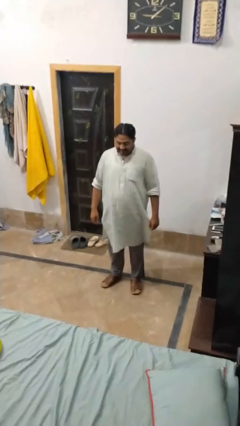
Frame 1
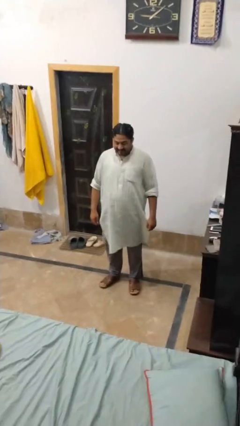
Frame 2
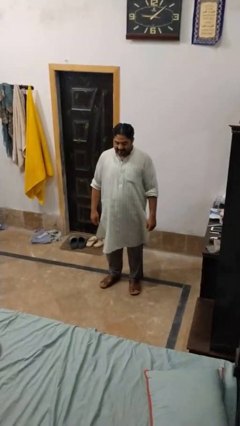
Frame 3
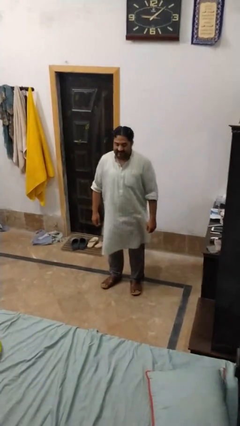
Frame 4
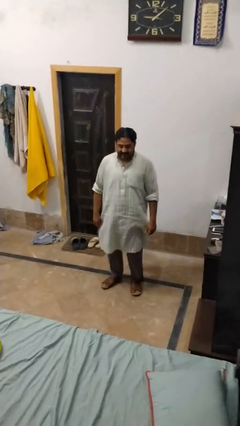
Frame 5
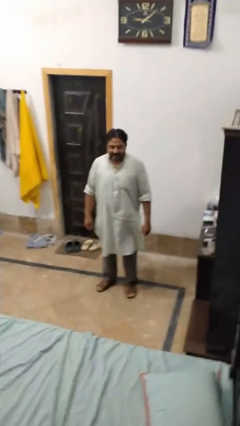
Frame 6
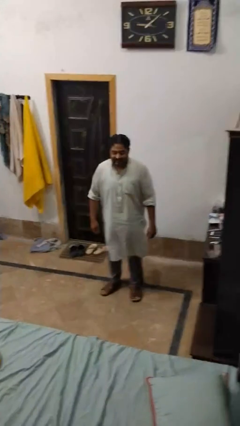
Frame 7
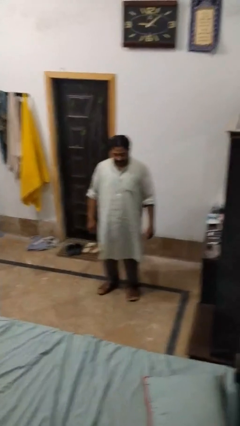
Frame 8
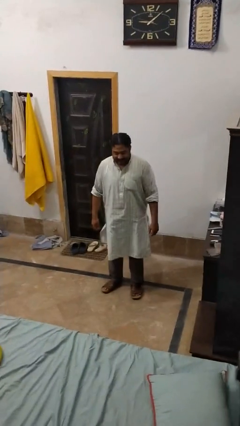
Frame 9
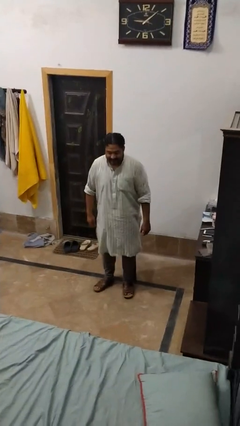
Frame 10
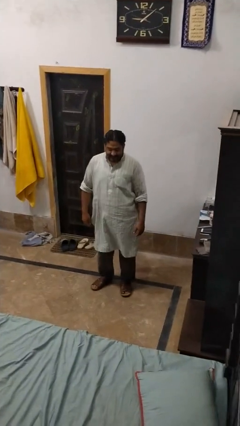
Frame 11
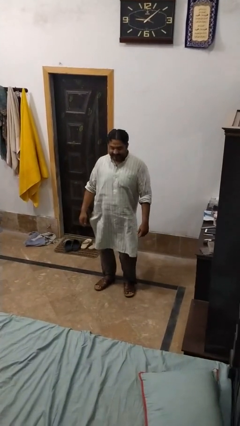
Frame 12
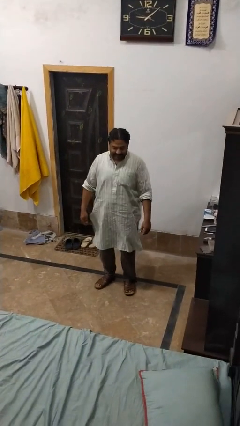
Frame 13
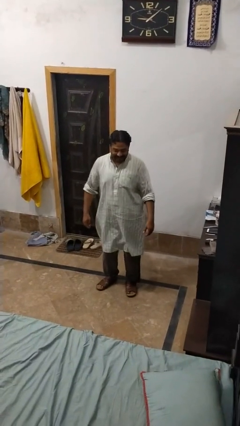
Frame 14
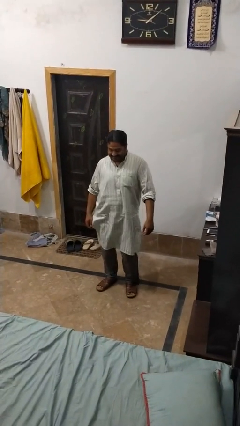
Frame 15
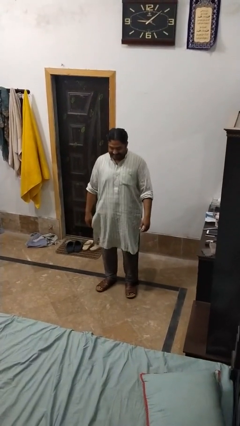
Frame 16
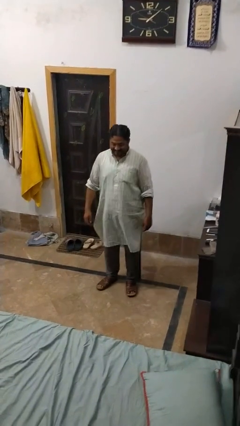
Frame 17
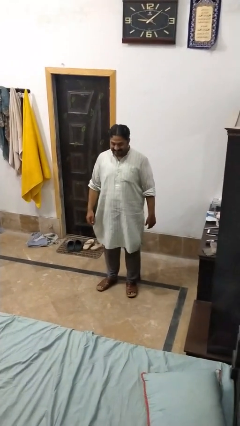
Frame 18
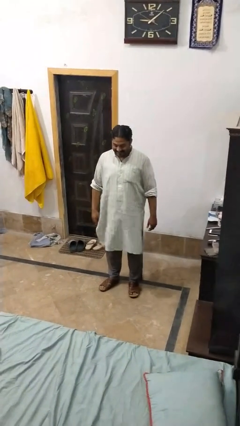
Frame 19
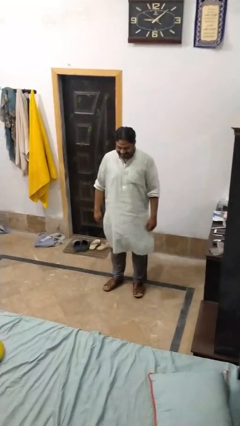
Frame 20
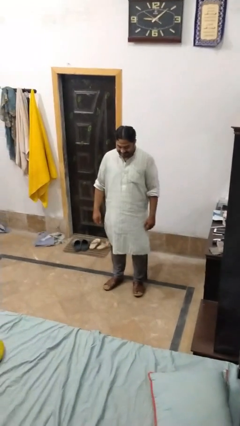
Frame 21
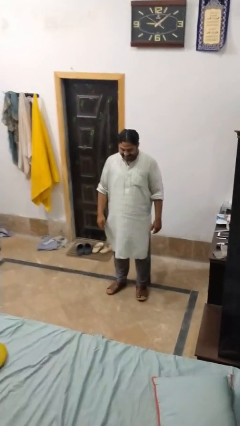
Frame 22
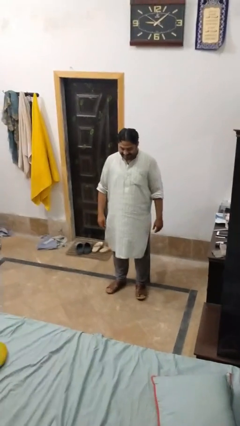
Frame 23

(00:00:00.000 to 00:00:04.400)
person wiggles hips

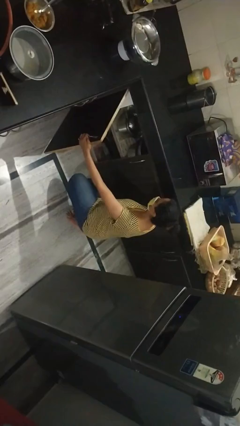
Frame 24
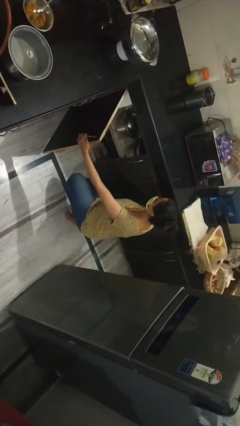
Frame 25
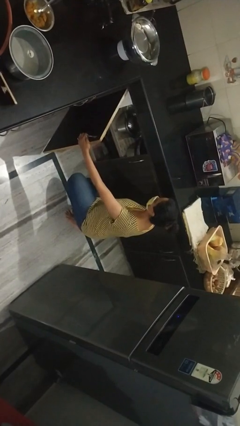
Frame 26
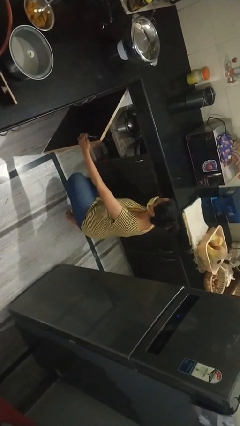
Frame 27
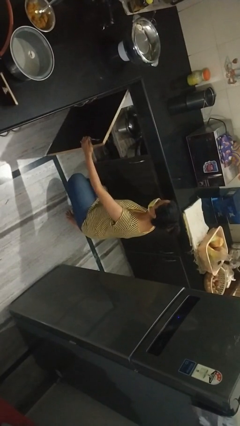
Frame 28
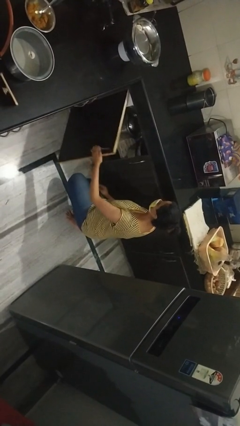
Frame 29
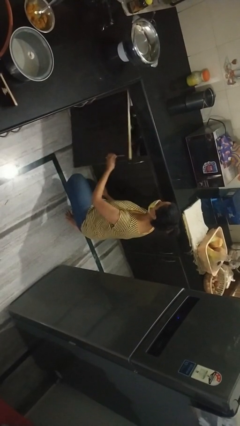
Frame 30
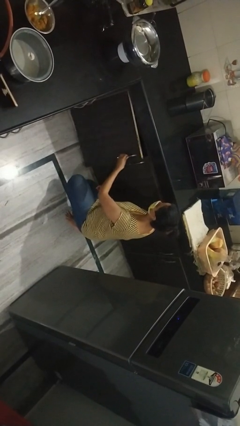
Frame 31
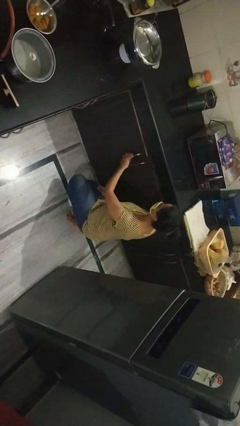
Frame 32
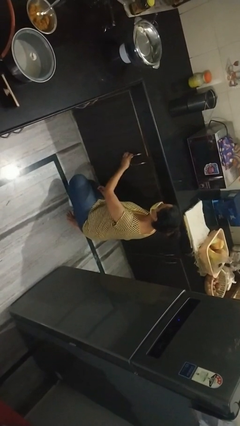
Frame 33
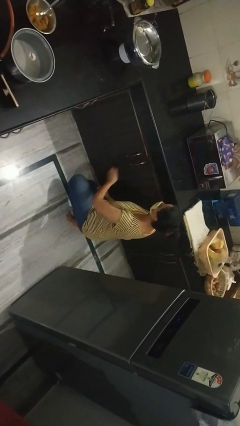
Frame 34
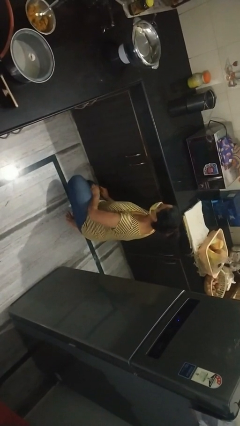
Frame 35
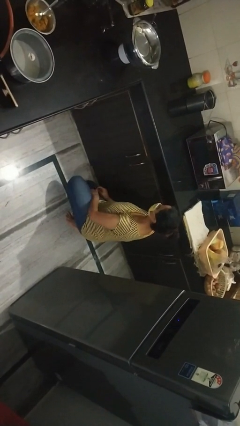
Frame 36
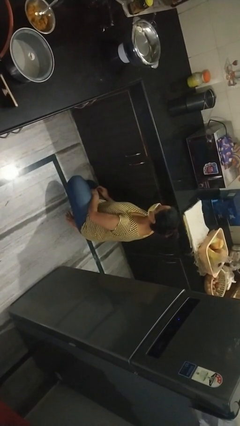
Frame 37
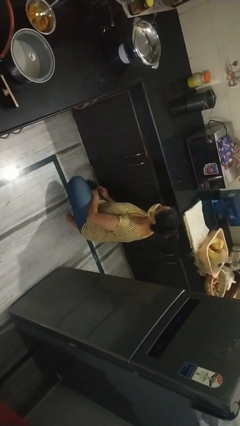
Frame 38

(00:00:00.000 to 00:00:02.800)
person closes cabinet

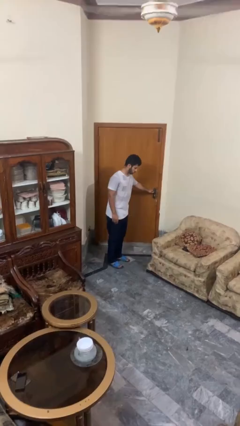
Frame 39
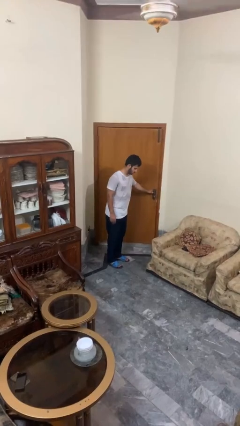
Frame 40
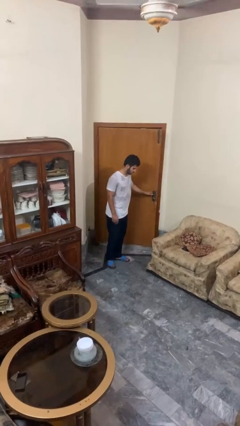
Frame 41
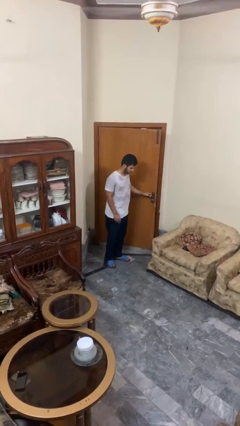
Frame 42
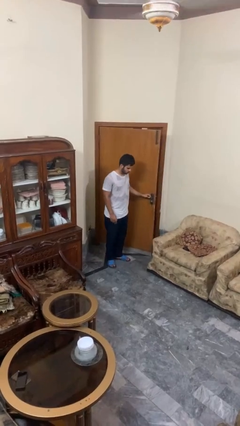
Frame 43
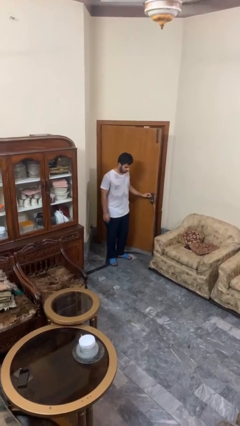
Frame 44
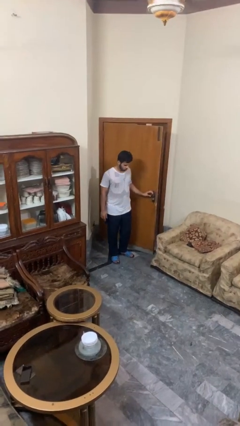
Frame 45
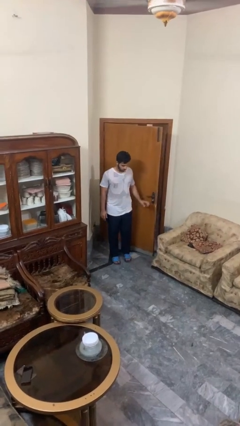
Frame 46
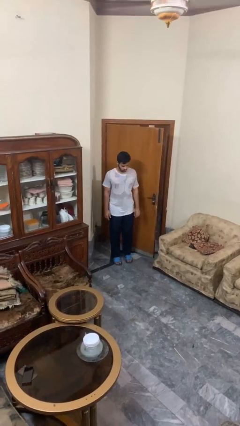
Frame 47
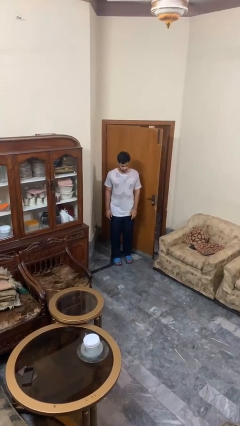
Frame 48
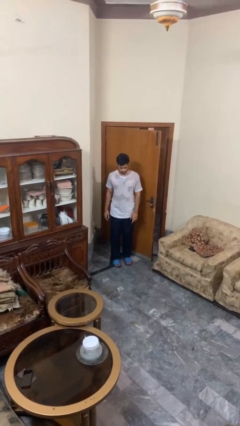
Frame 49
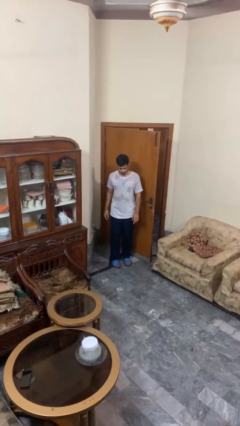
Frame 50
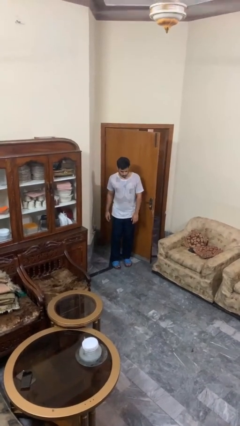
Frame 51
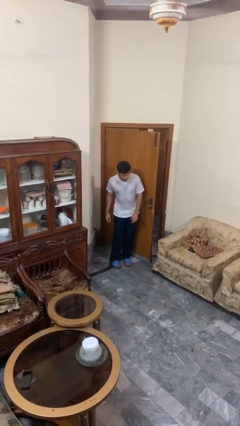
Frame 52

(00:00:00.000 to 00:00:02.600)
person opens facility door

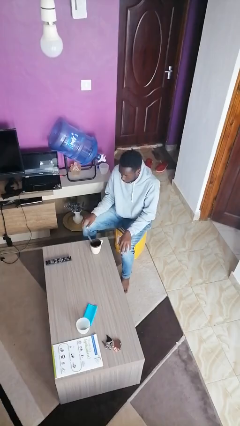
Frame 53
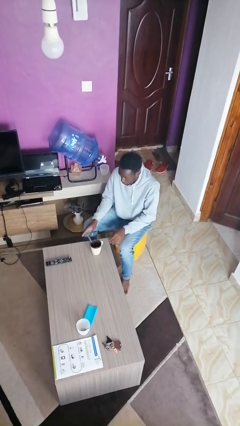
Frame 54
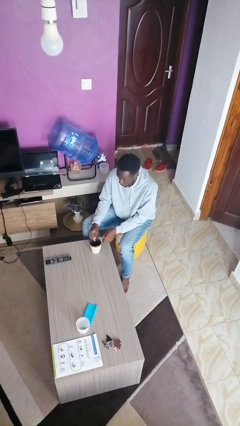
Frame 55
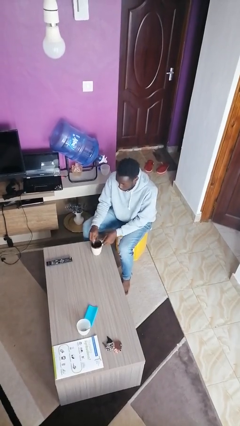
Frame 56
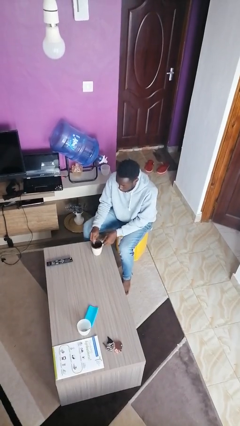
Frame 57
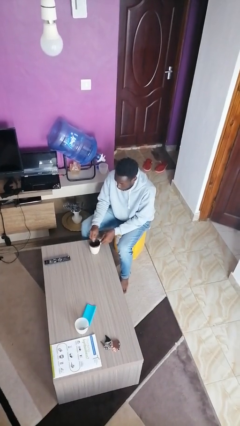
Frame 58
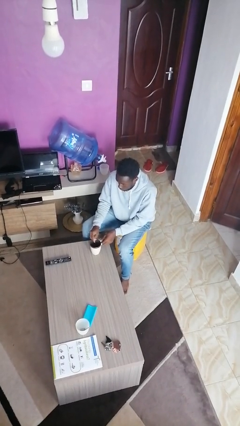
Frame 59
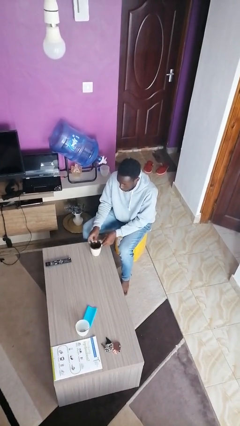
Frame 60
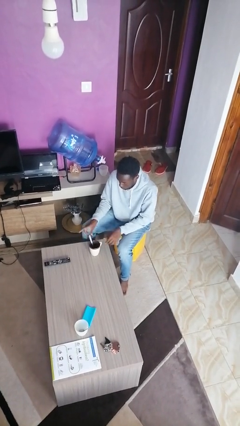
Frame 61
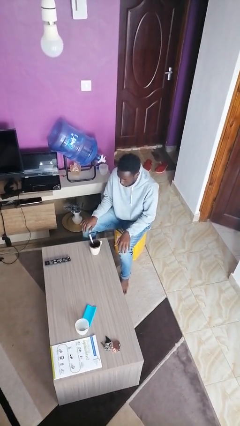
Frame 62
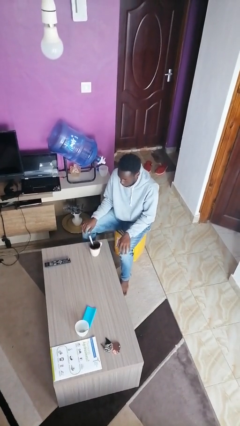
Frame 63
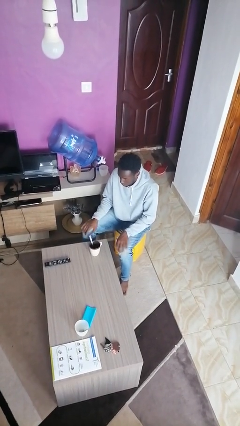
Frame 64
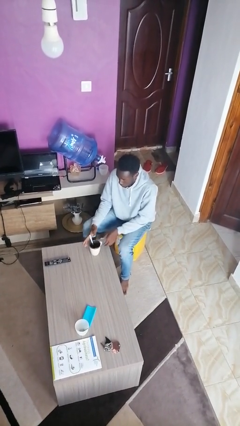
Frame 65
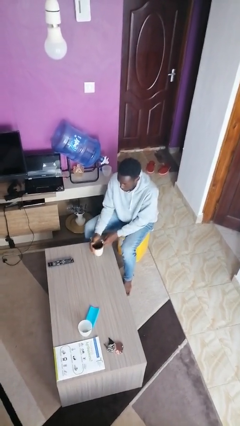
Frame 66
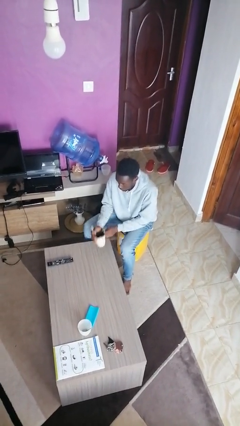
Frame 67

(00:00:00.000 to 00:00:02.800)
person stirs mug

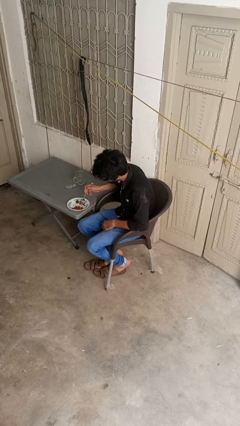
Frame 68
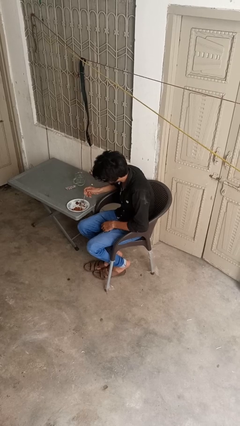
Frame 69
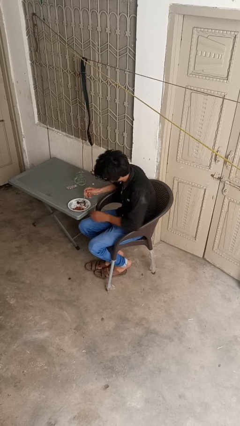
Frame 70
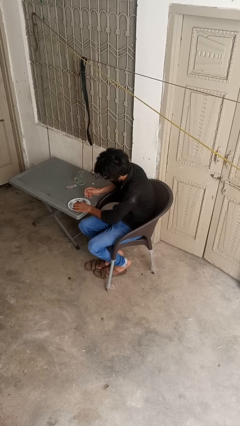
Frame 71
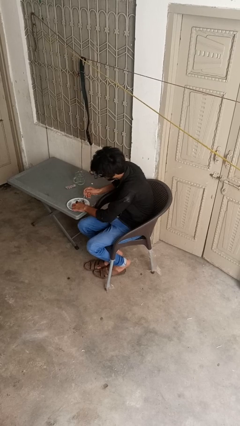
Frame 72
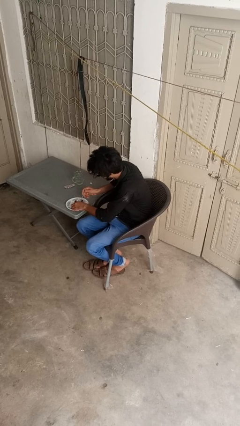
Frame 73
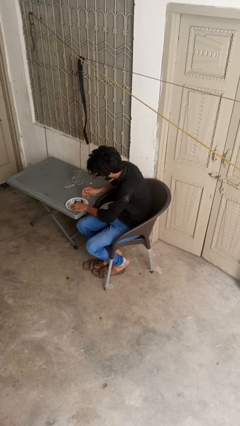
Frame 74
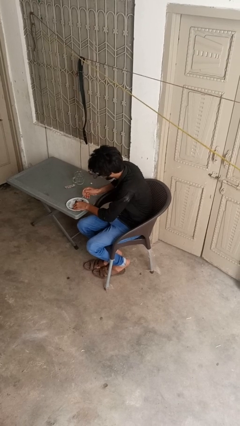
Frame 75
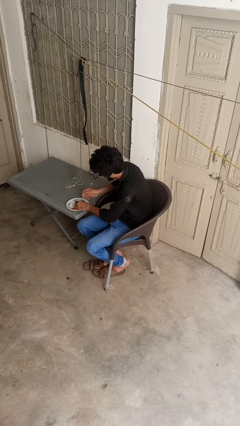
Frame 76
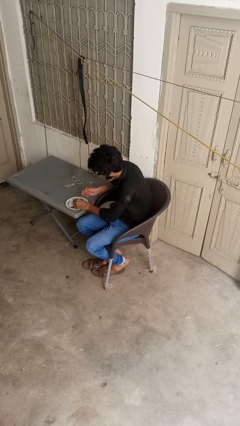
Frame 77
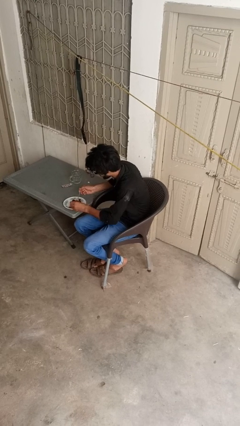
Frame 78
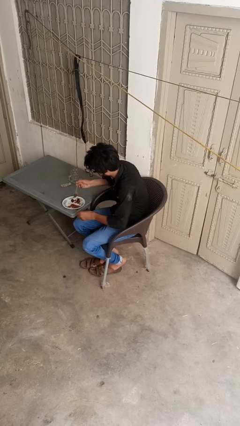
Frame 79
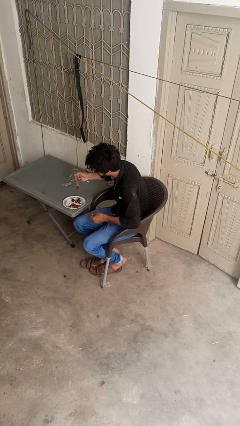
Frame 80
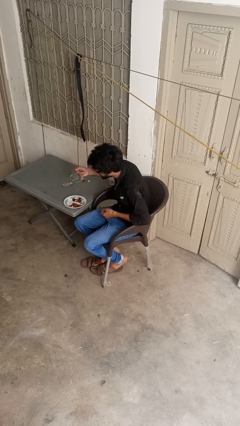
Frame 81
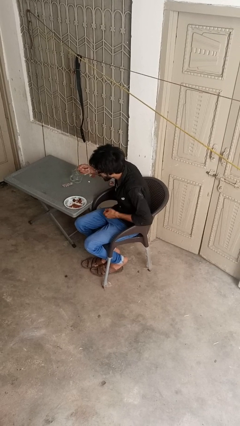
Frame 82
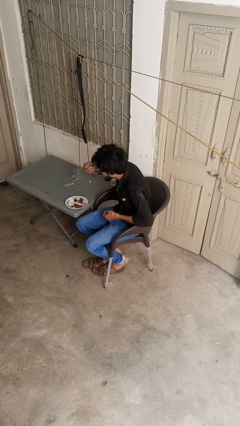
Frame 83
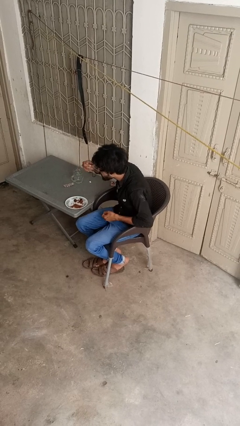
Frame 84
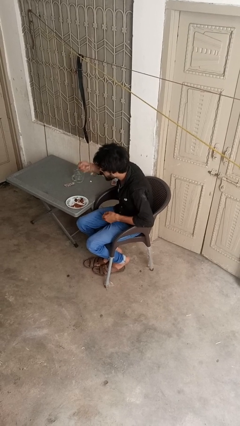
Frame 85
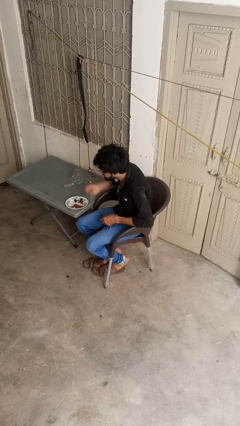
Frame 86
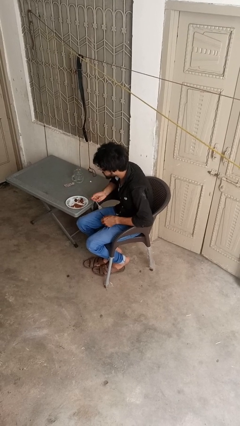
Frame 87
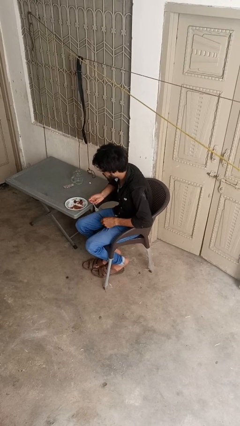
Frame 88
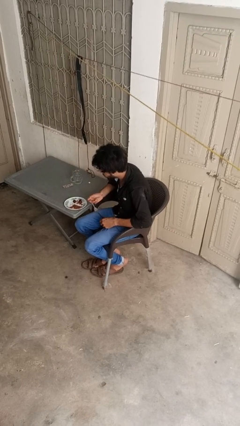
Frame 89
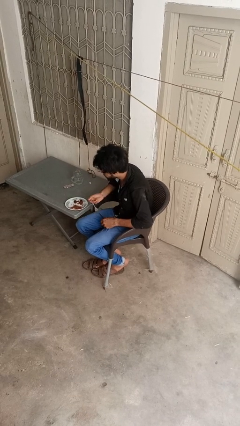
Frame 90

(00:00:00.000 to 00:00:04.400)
person eats with utensil

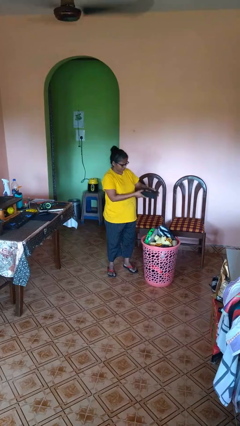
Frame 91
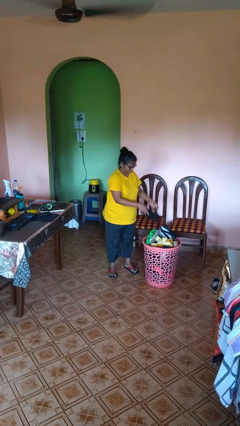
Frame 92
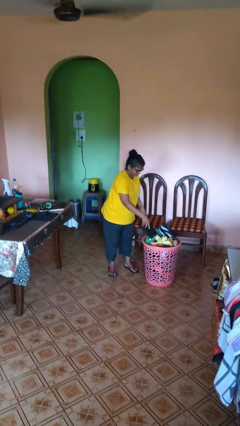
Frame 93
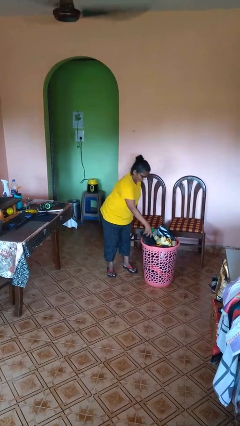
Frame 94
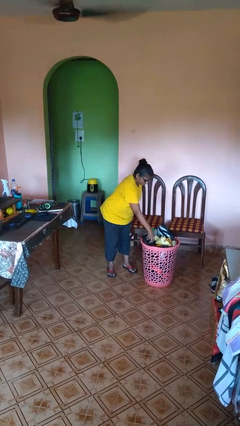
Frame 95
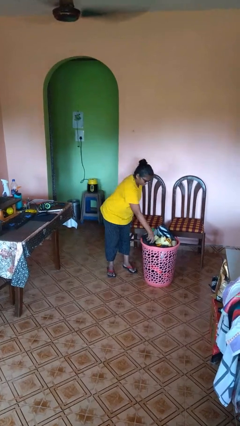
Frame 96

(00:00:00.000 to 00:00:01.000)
person puts object into basket
